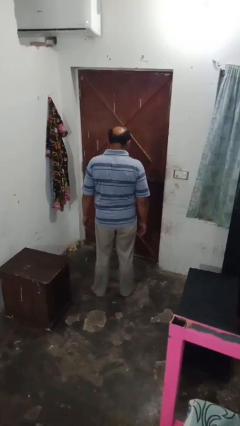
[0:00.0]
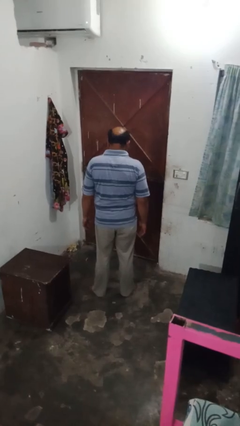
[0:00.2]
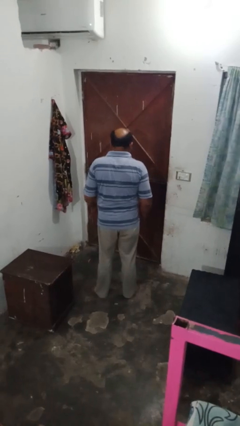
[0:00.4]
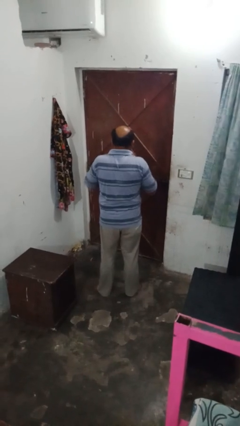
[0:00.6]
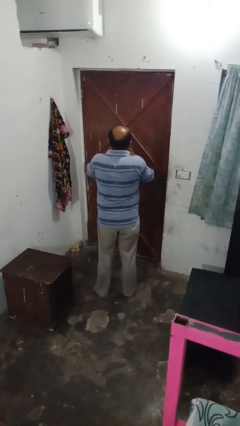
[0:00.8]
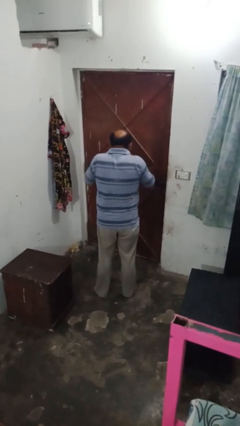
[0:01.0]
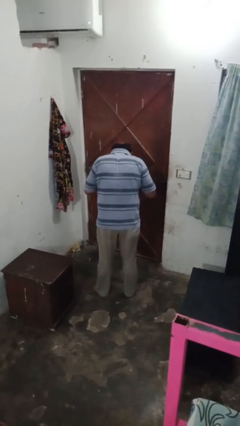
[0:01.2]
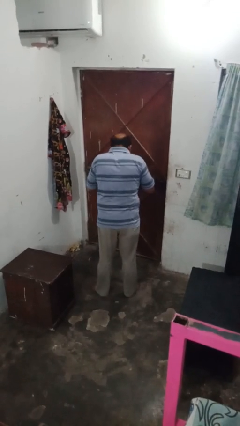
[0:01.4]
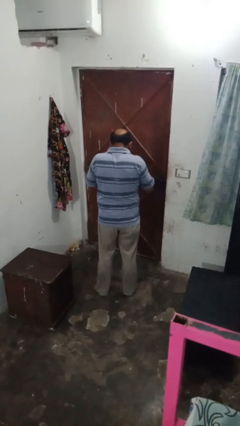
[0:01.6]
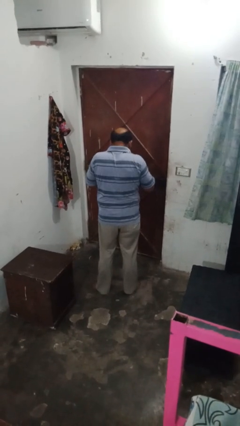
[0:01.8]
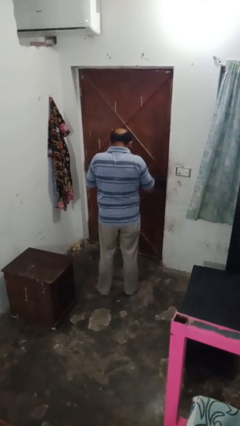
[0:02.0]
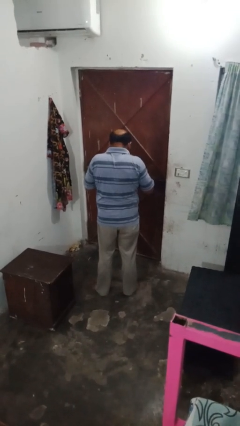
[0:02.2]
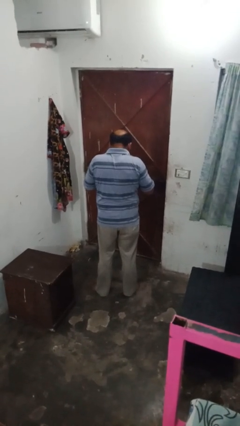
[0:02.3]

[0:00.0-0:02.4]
person blows nose

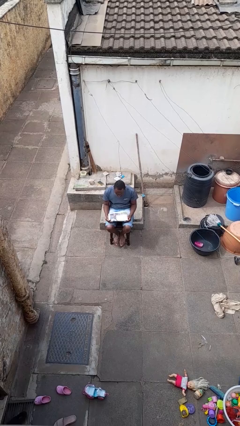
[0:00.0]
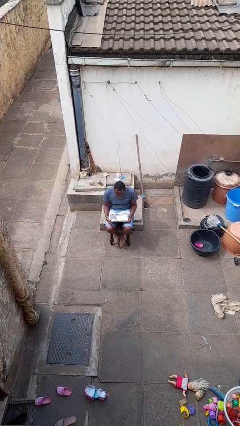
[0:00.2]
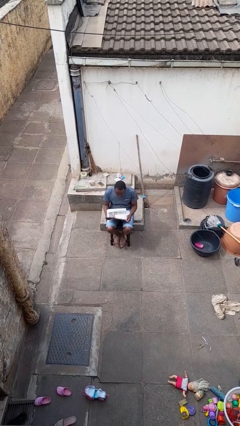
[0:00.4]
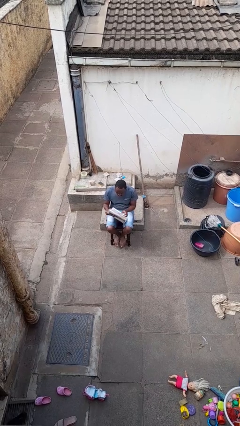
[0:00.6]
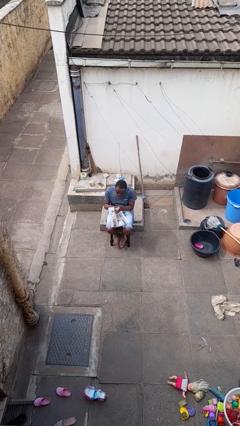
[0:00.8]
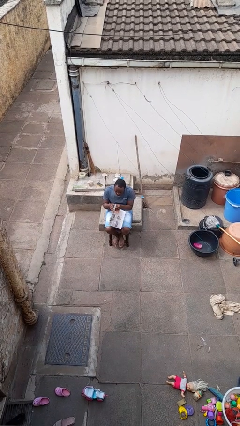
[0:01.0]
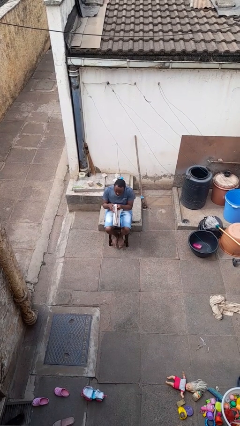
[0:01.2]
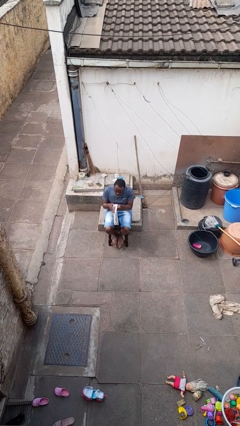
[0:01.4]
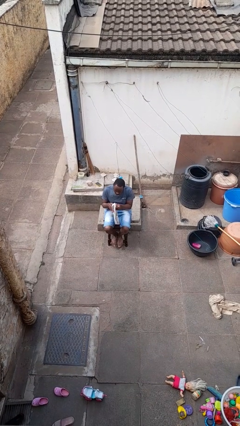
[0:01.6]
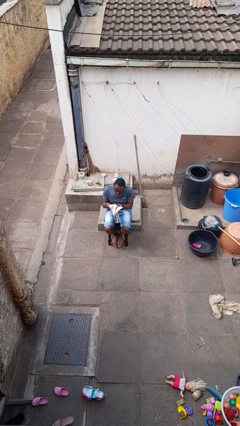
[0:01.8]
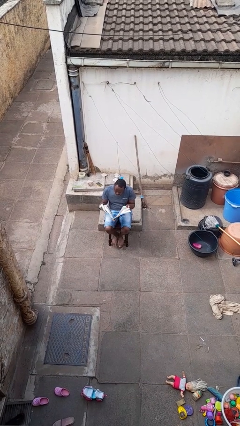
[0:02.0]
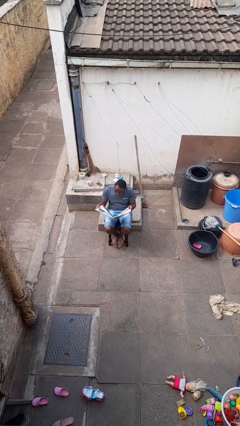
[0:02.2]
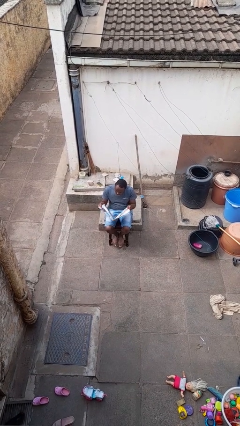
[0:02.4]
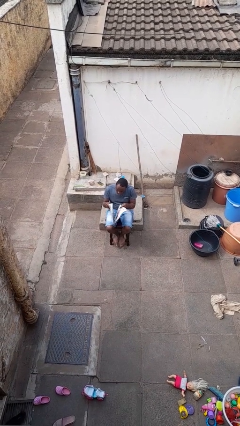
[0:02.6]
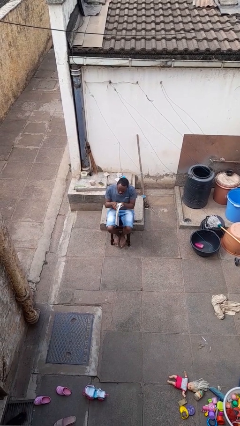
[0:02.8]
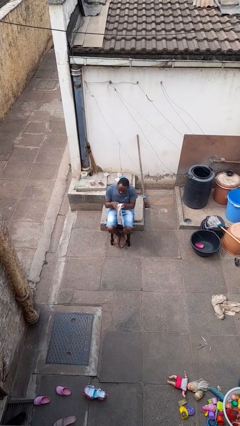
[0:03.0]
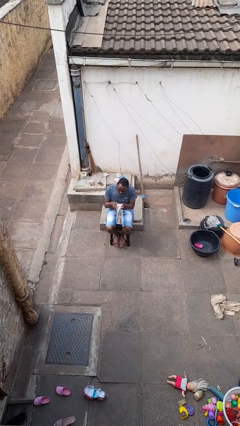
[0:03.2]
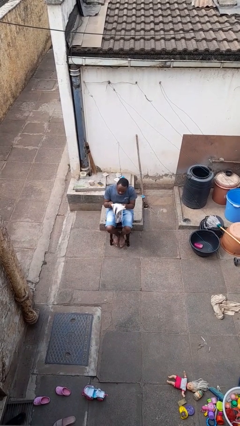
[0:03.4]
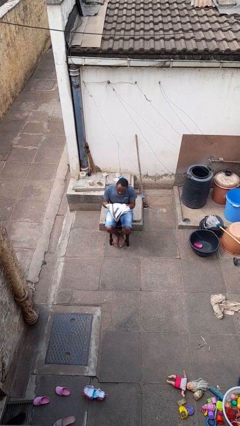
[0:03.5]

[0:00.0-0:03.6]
person reads newspaper

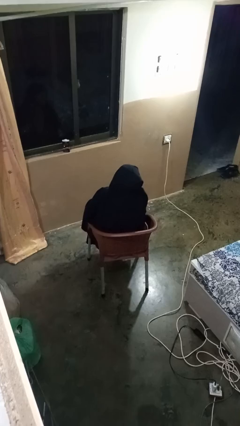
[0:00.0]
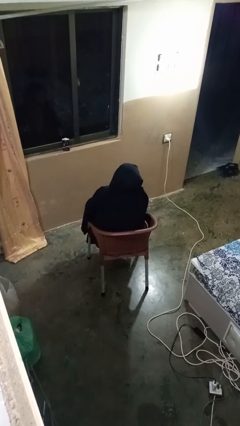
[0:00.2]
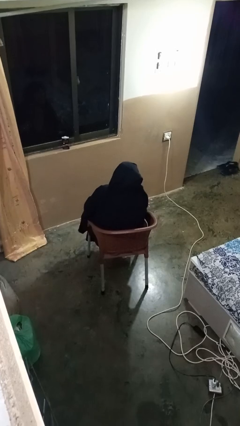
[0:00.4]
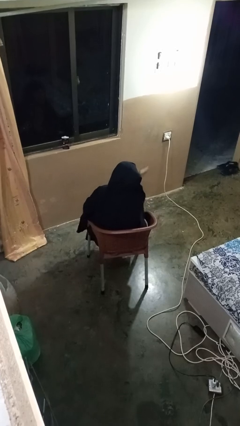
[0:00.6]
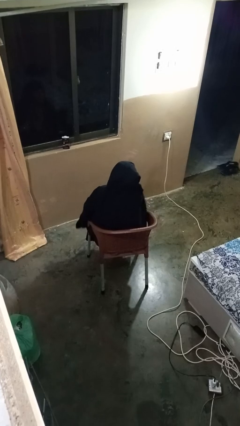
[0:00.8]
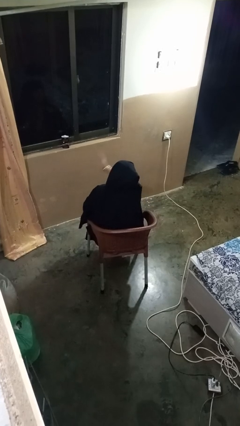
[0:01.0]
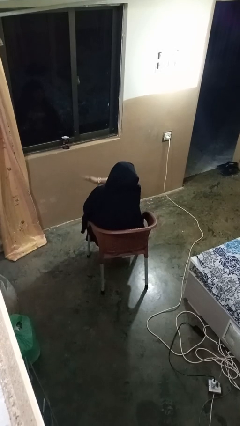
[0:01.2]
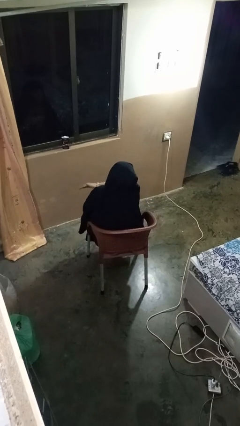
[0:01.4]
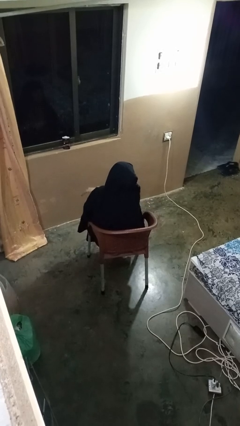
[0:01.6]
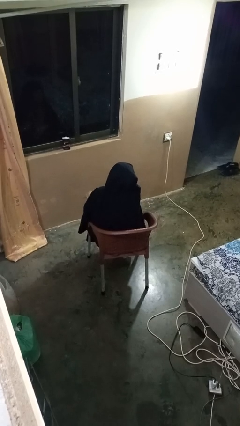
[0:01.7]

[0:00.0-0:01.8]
person gestures swipe left

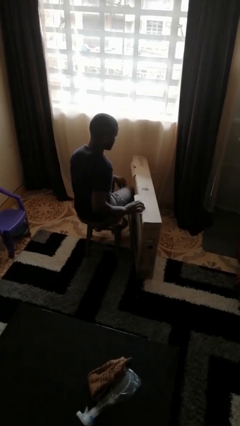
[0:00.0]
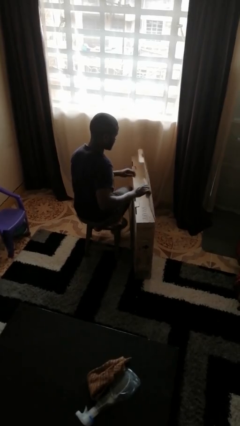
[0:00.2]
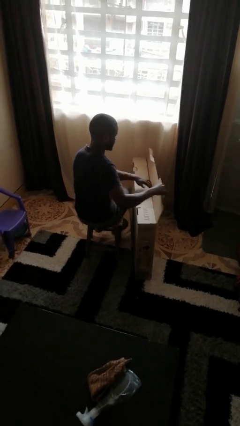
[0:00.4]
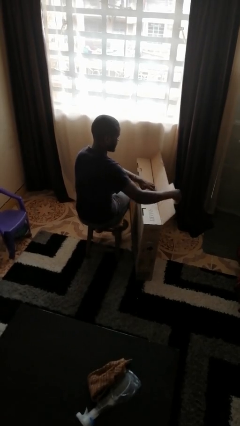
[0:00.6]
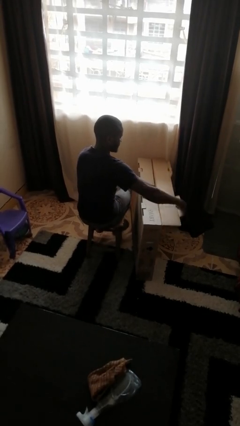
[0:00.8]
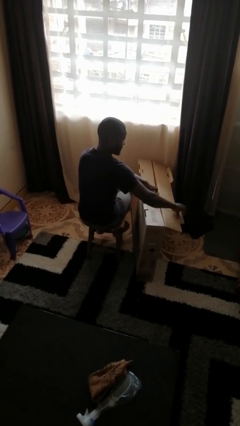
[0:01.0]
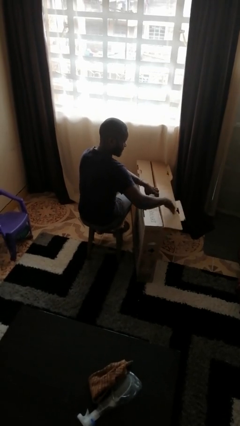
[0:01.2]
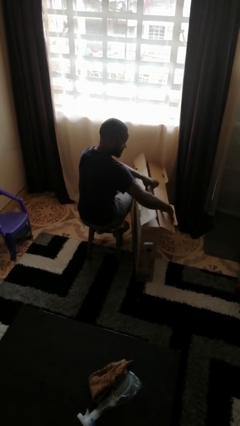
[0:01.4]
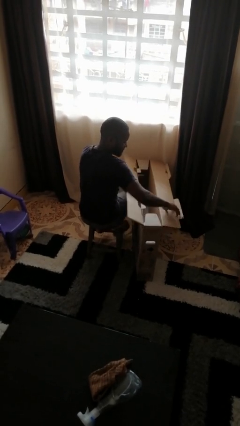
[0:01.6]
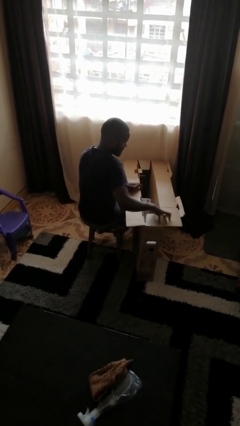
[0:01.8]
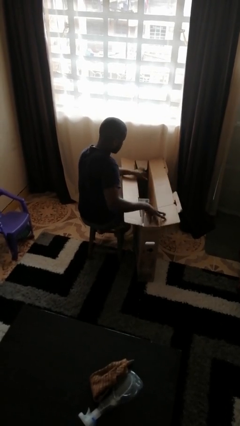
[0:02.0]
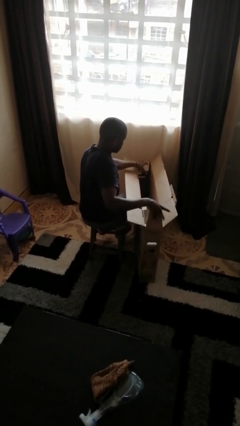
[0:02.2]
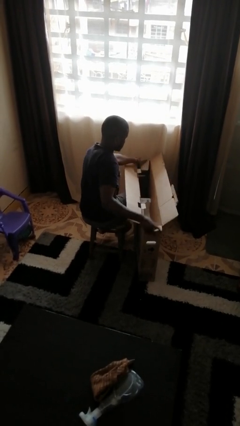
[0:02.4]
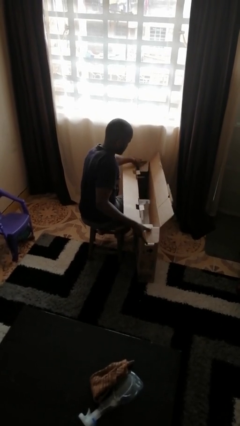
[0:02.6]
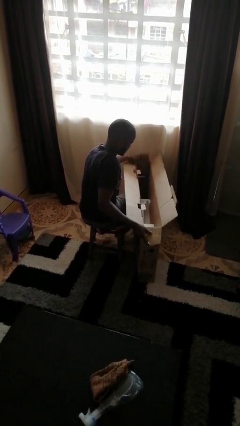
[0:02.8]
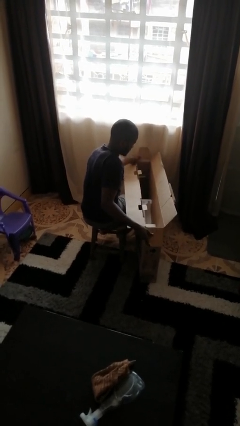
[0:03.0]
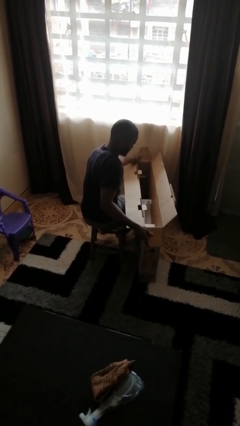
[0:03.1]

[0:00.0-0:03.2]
person opens box

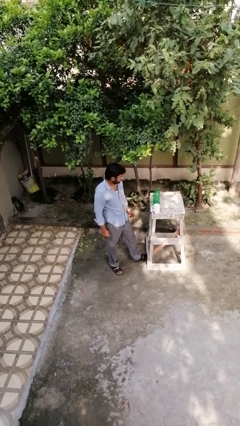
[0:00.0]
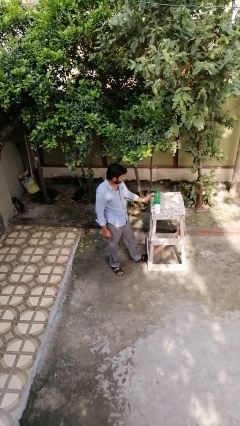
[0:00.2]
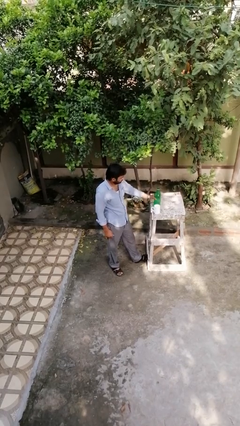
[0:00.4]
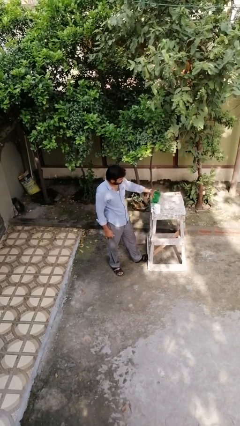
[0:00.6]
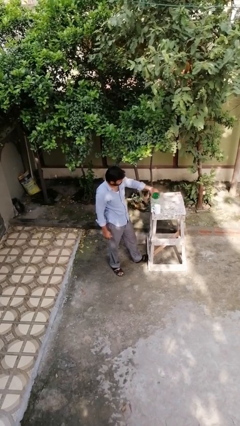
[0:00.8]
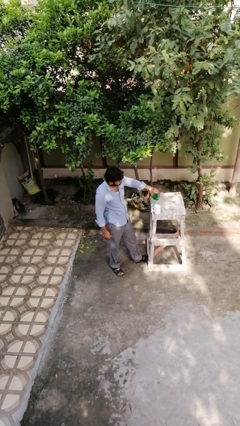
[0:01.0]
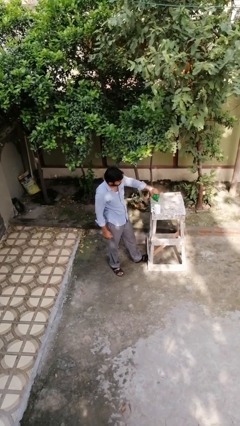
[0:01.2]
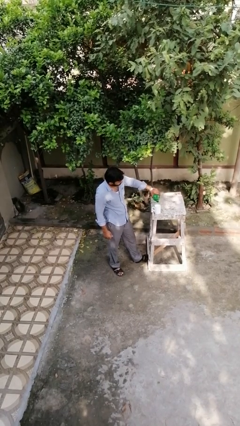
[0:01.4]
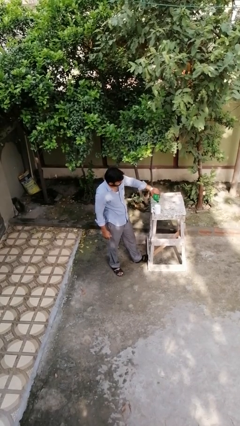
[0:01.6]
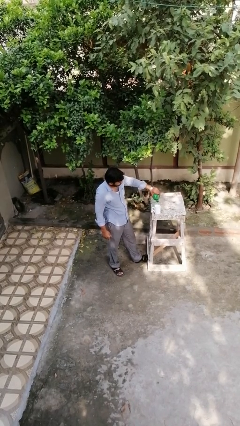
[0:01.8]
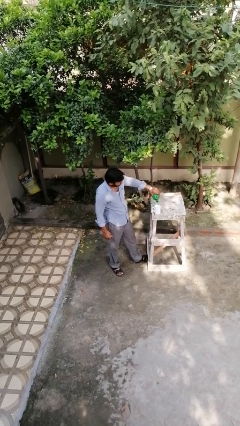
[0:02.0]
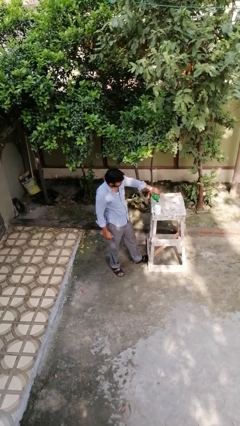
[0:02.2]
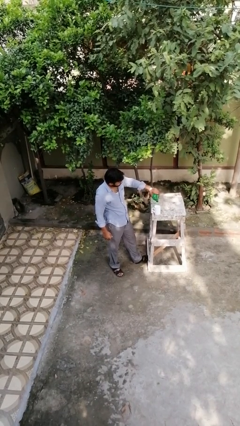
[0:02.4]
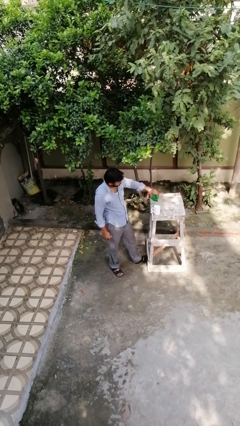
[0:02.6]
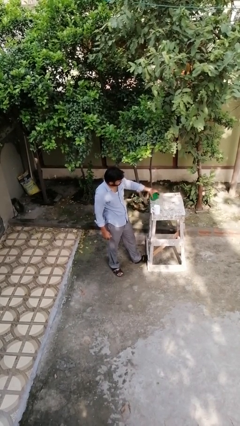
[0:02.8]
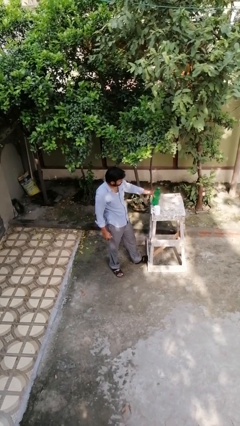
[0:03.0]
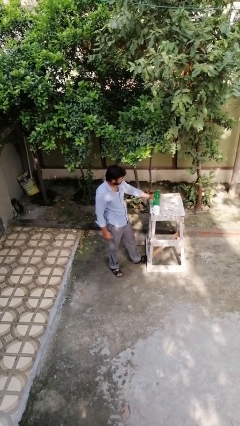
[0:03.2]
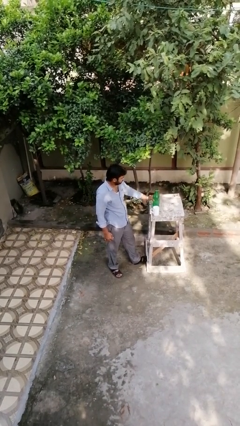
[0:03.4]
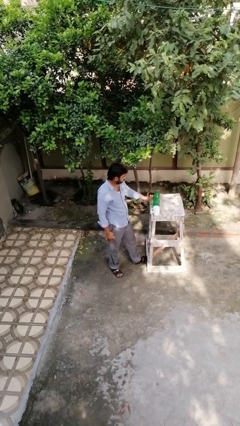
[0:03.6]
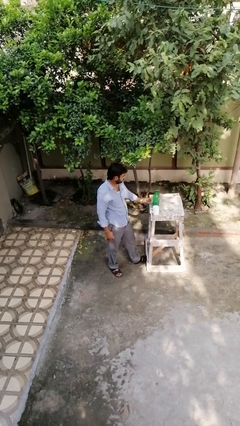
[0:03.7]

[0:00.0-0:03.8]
person pours liquid into cup

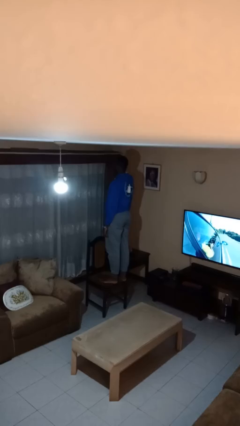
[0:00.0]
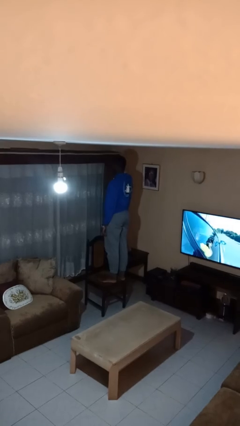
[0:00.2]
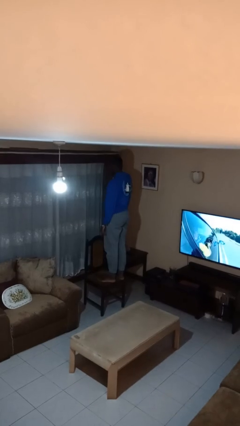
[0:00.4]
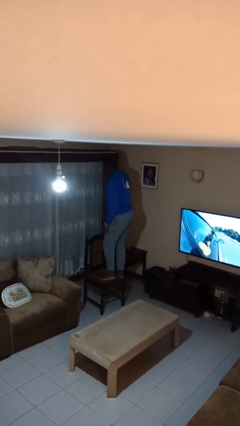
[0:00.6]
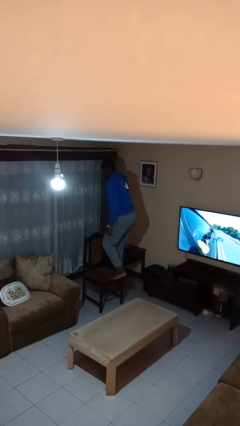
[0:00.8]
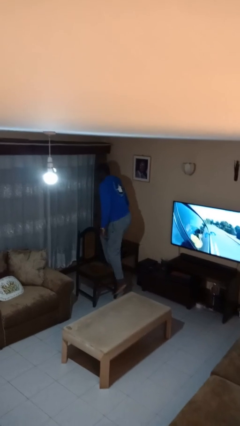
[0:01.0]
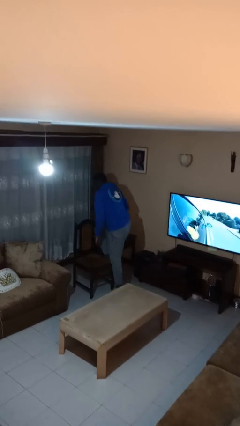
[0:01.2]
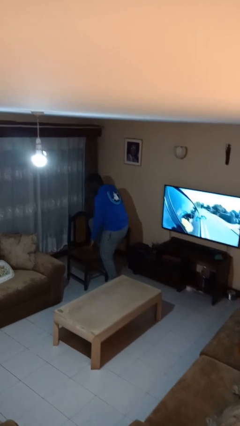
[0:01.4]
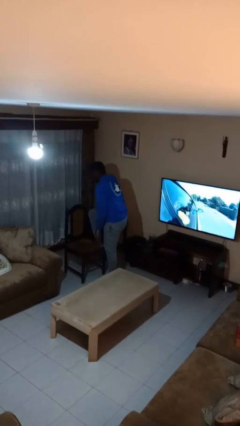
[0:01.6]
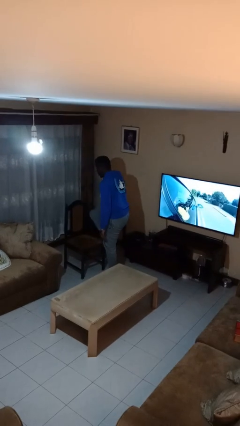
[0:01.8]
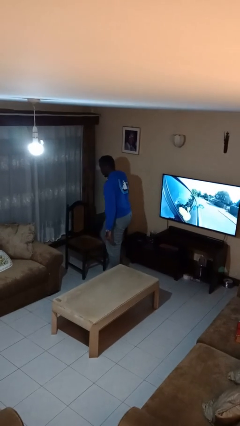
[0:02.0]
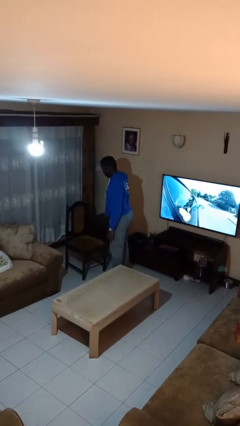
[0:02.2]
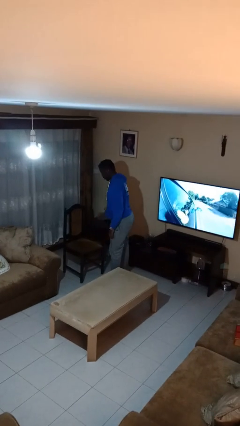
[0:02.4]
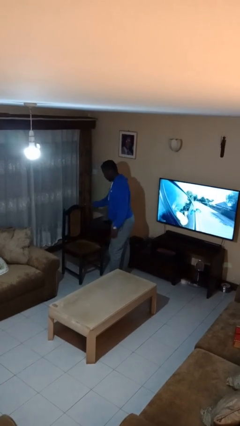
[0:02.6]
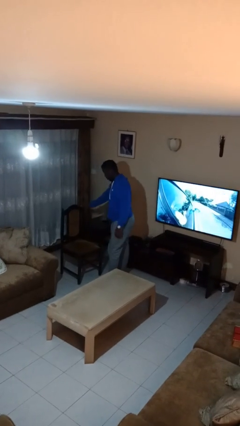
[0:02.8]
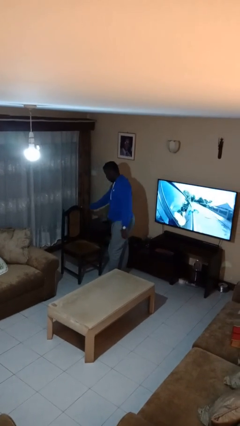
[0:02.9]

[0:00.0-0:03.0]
person climbs off chair
